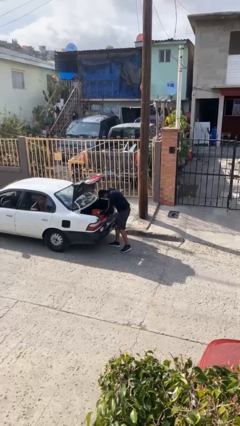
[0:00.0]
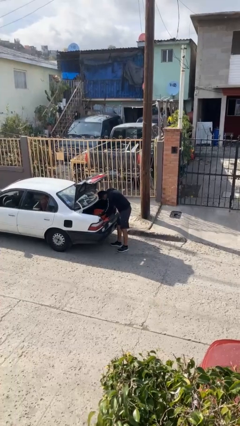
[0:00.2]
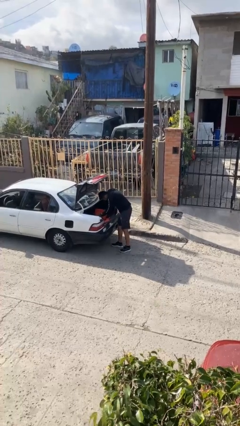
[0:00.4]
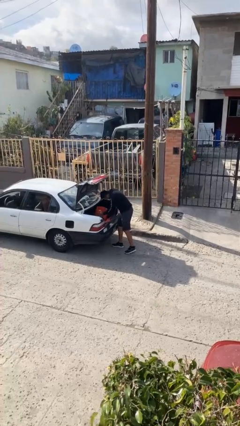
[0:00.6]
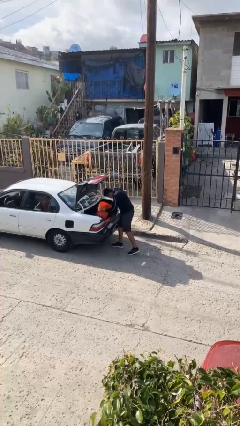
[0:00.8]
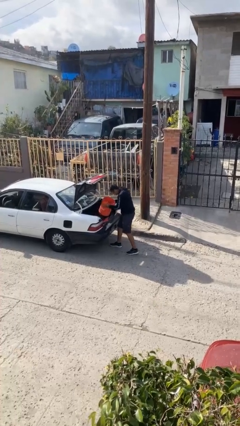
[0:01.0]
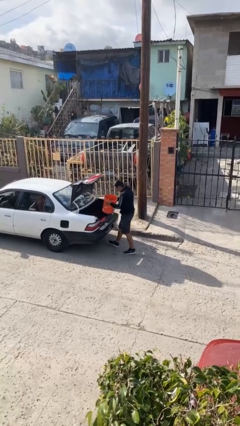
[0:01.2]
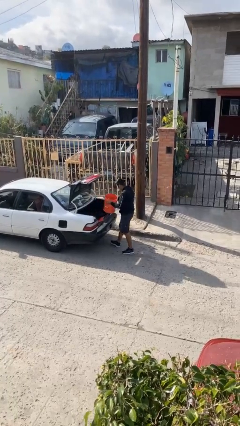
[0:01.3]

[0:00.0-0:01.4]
person unloads car

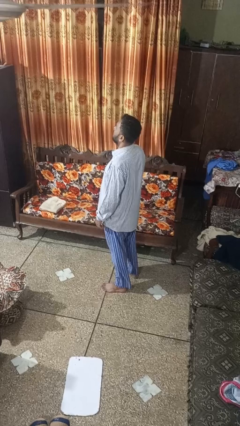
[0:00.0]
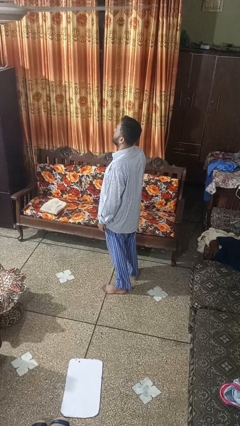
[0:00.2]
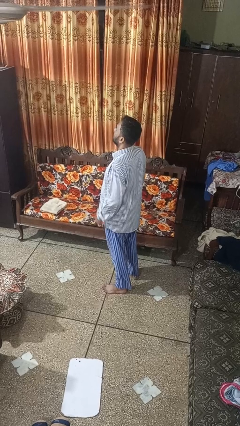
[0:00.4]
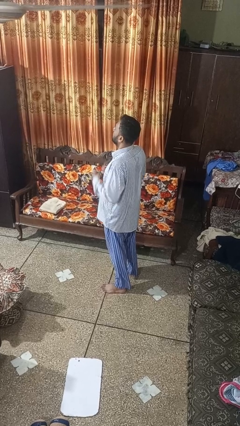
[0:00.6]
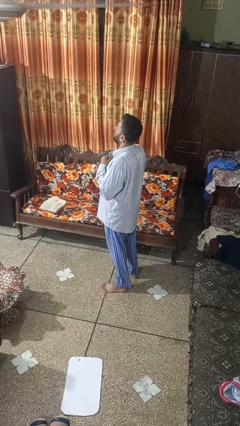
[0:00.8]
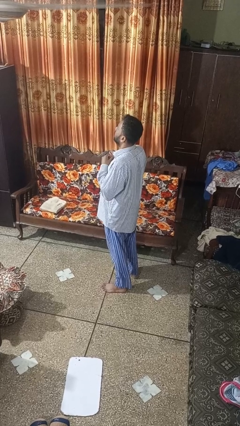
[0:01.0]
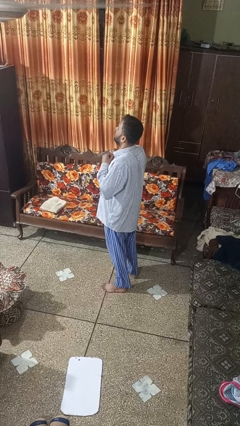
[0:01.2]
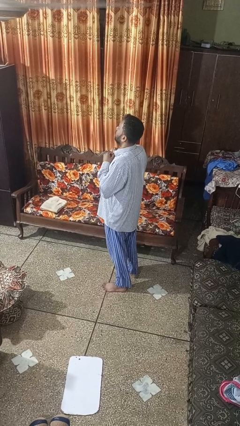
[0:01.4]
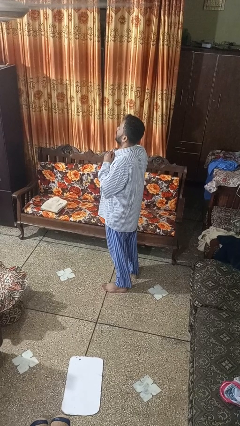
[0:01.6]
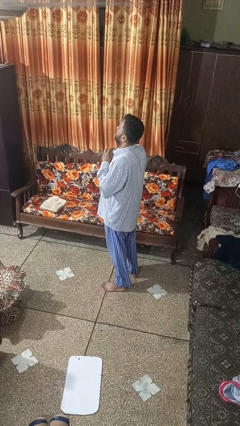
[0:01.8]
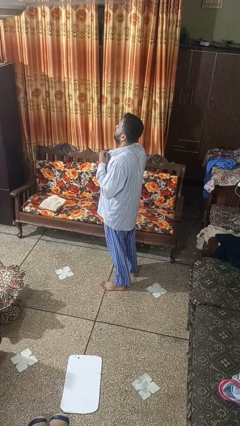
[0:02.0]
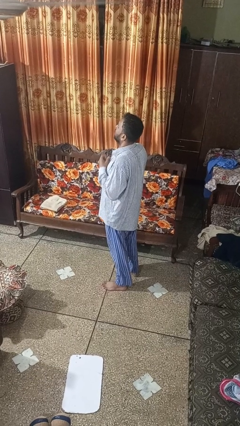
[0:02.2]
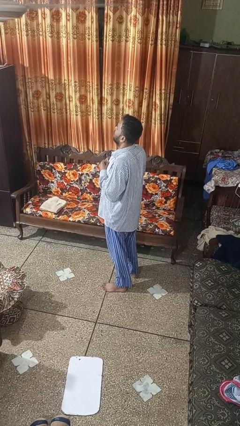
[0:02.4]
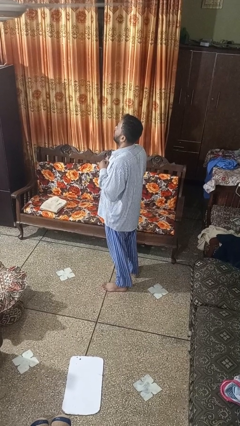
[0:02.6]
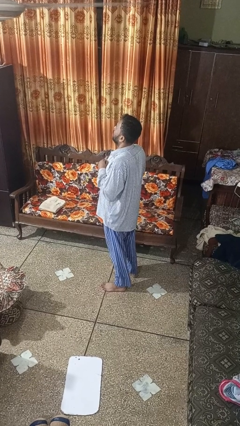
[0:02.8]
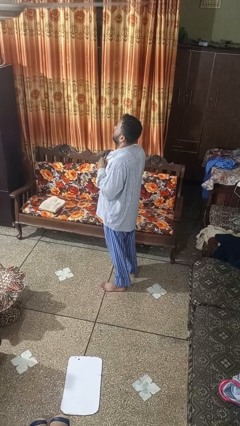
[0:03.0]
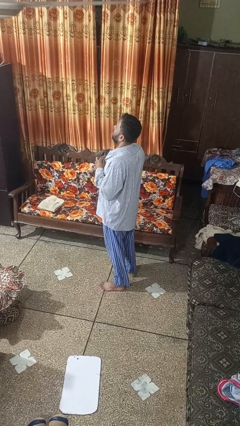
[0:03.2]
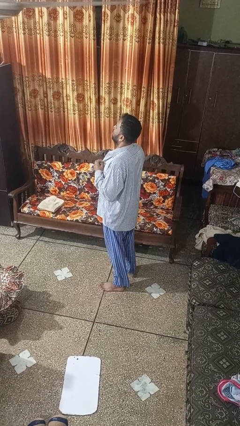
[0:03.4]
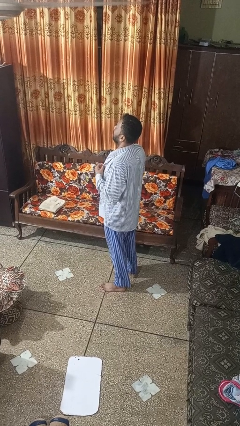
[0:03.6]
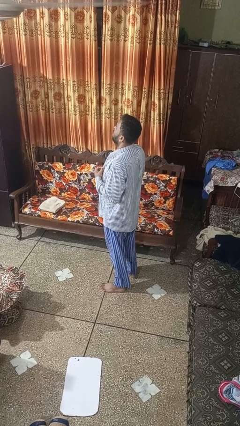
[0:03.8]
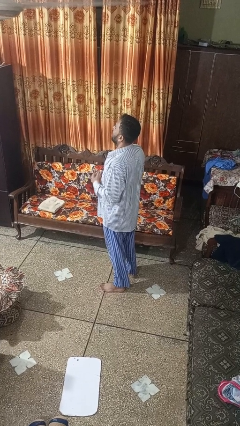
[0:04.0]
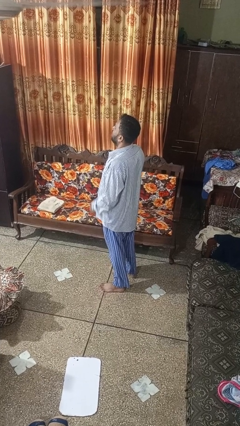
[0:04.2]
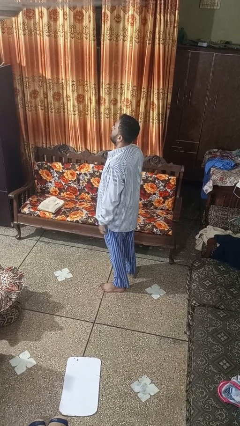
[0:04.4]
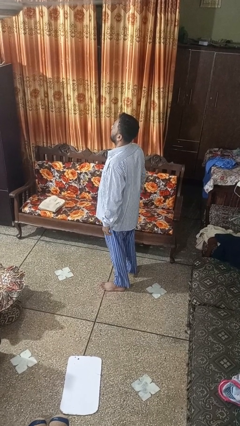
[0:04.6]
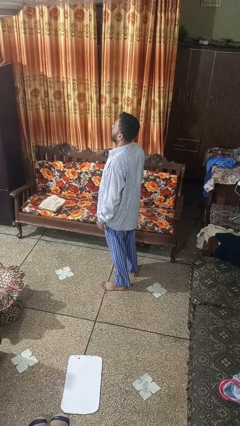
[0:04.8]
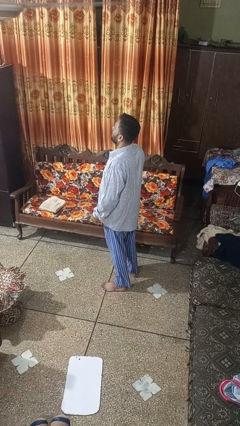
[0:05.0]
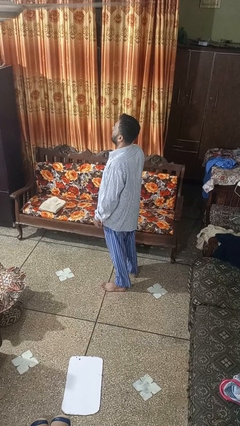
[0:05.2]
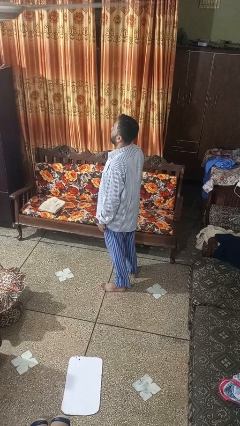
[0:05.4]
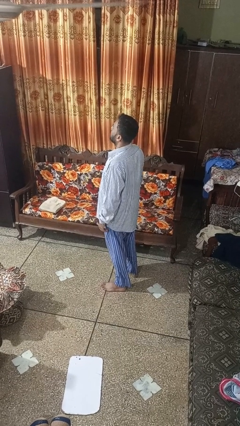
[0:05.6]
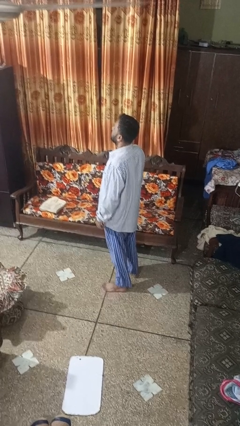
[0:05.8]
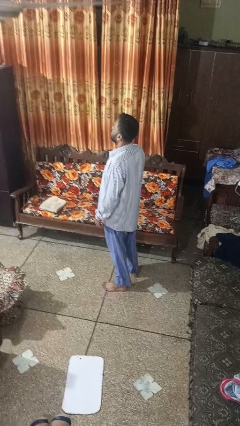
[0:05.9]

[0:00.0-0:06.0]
person unbuttons shirt

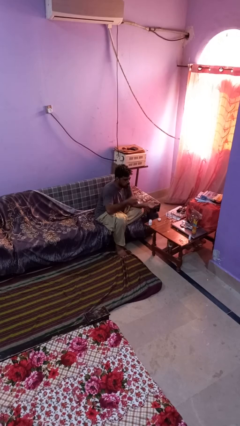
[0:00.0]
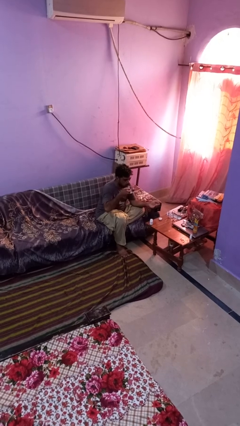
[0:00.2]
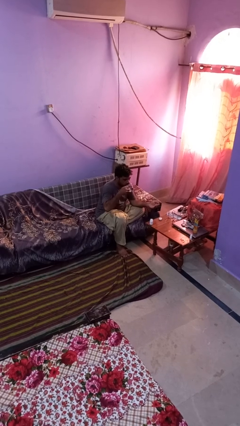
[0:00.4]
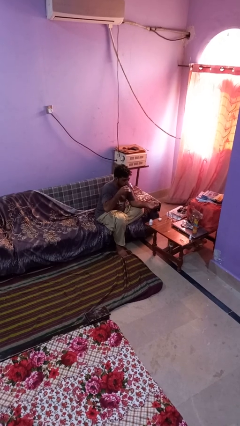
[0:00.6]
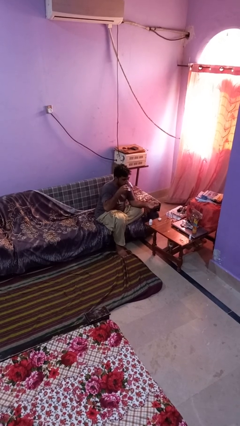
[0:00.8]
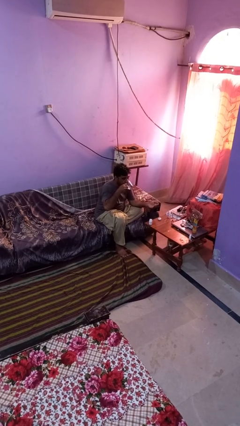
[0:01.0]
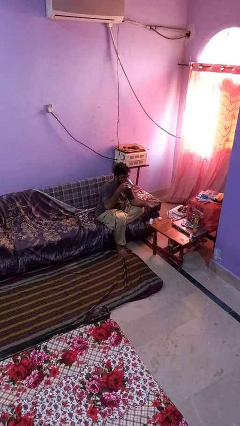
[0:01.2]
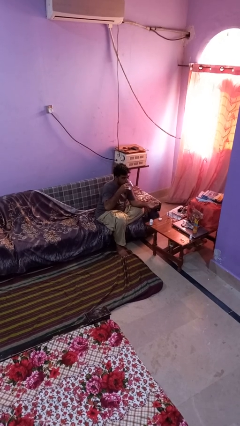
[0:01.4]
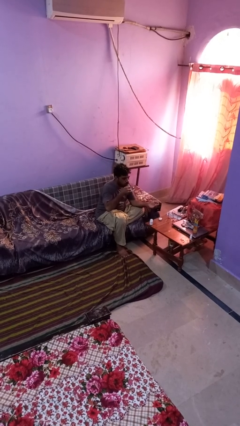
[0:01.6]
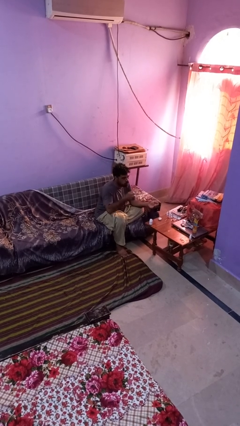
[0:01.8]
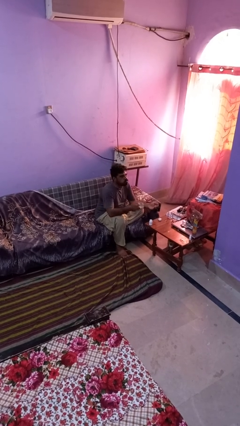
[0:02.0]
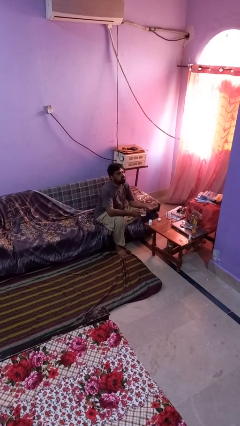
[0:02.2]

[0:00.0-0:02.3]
person drinks from cup

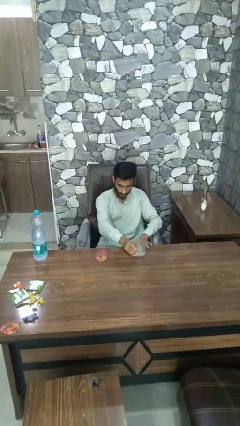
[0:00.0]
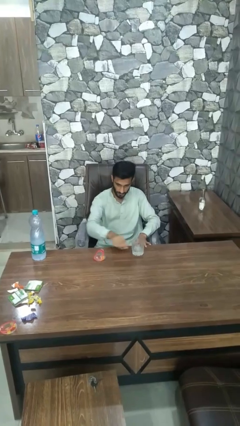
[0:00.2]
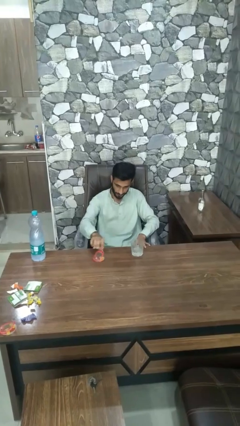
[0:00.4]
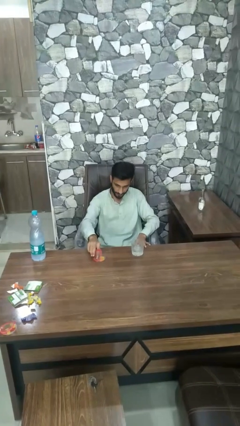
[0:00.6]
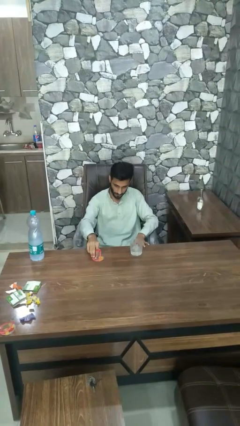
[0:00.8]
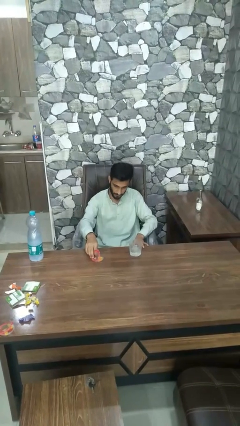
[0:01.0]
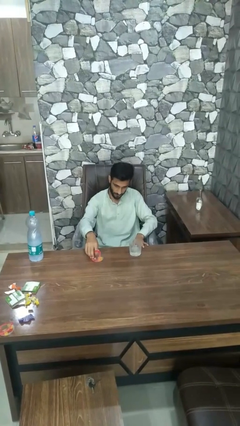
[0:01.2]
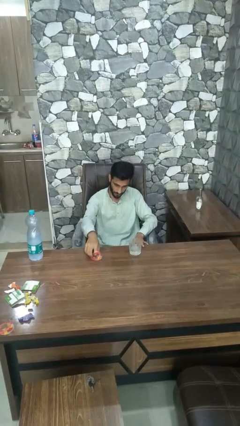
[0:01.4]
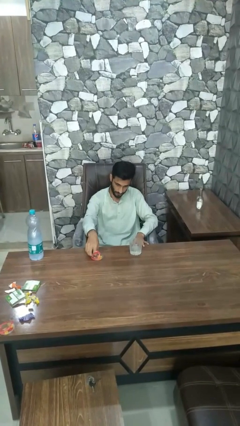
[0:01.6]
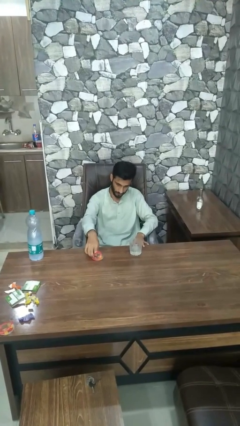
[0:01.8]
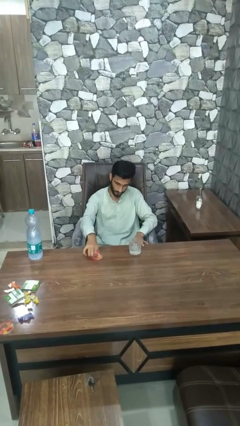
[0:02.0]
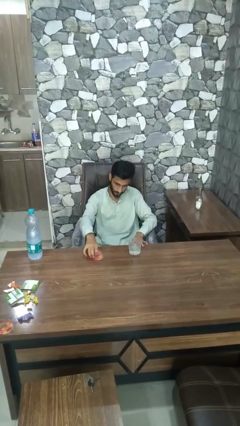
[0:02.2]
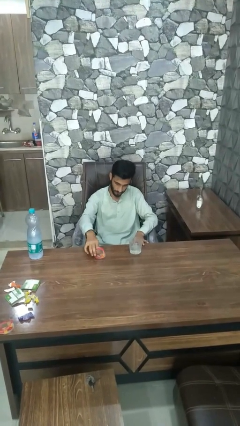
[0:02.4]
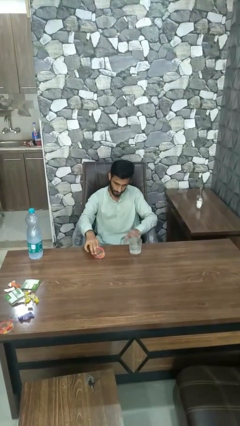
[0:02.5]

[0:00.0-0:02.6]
person takes medicine pills

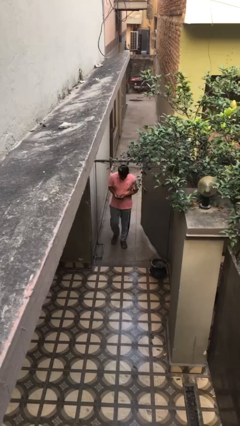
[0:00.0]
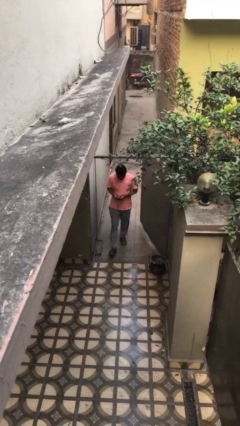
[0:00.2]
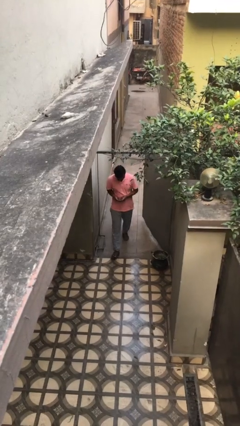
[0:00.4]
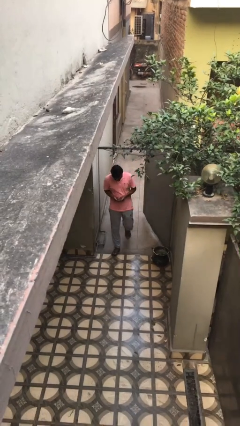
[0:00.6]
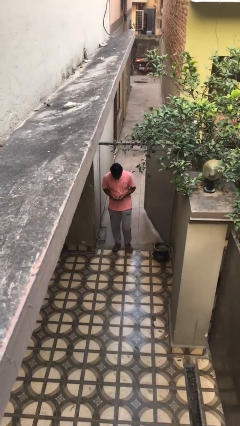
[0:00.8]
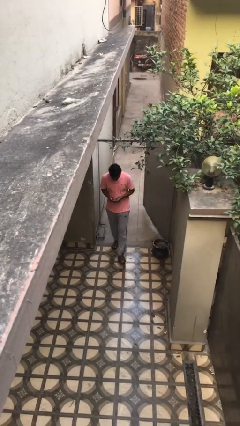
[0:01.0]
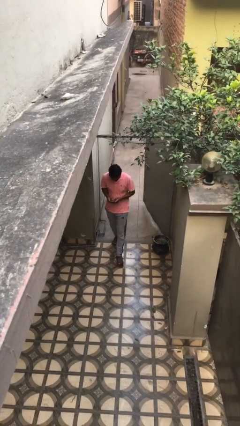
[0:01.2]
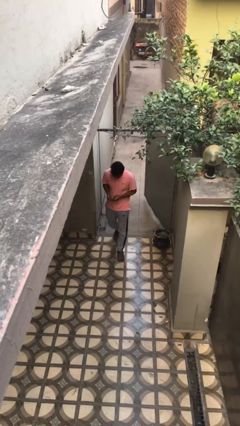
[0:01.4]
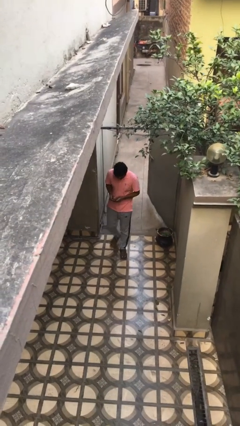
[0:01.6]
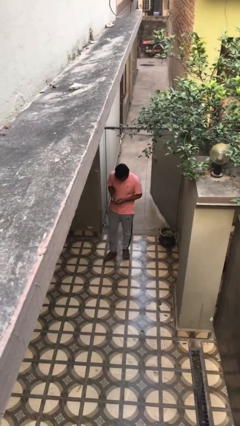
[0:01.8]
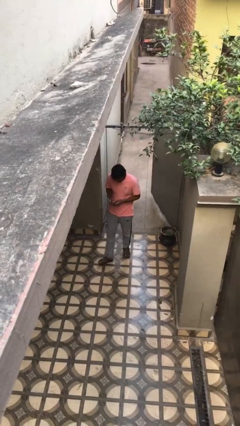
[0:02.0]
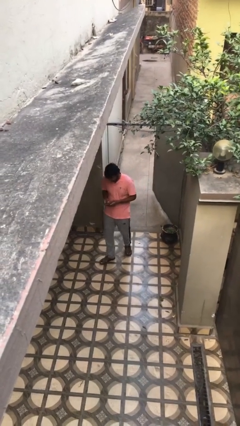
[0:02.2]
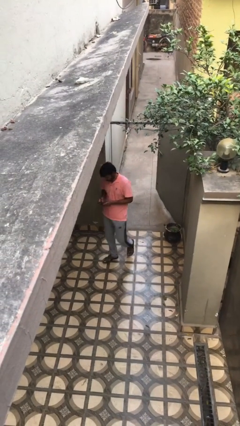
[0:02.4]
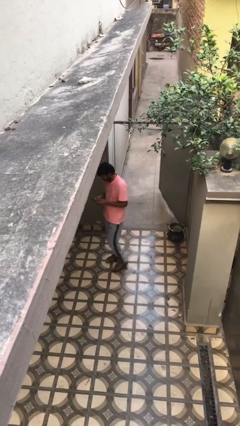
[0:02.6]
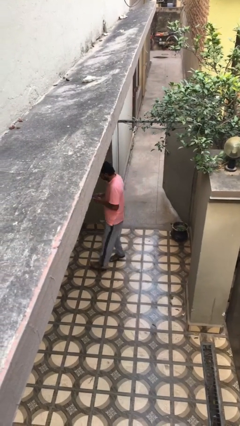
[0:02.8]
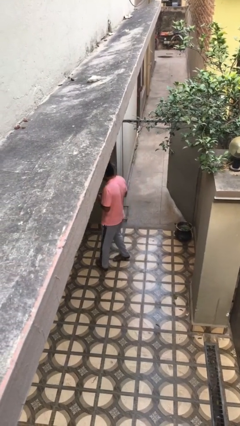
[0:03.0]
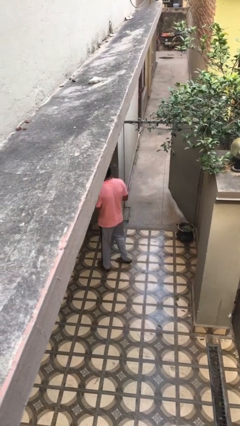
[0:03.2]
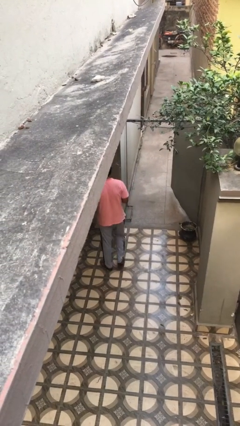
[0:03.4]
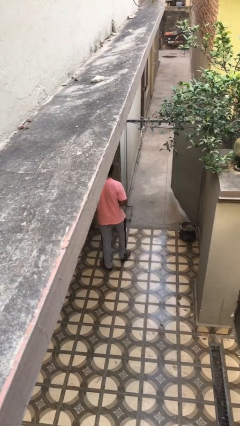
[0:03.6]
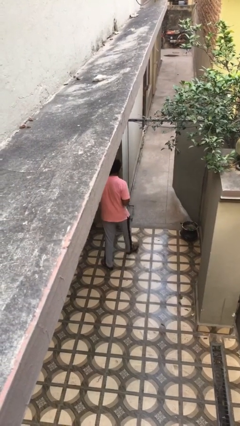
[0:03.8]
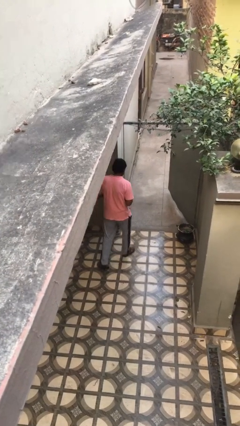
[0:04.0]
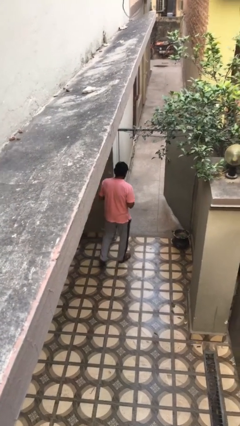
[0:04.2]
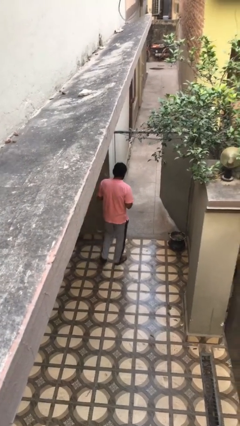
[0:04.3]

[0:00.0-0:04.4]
person enters scene through structure

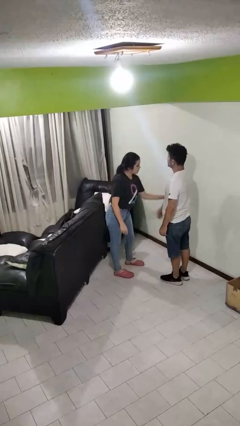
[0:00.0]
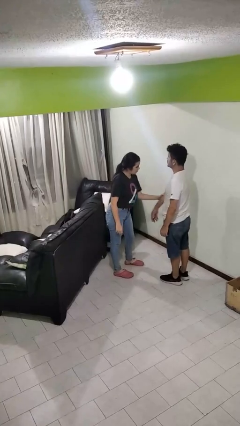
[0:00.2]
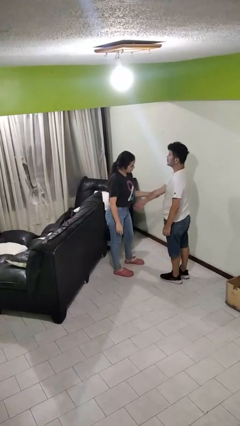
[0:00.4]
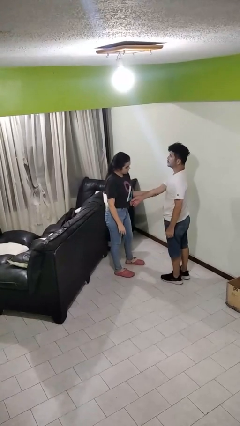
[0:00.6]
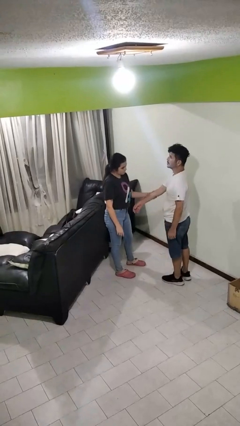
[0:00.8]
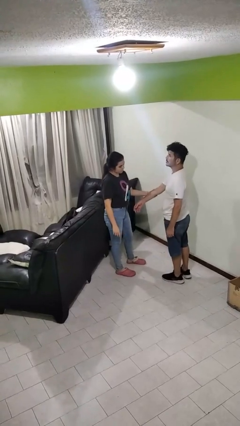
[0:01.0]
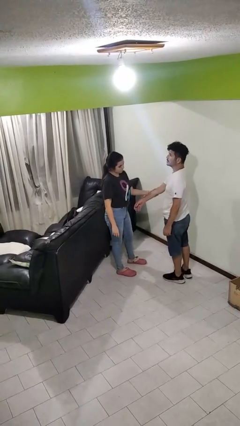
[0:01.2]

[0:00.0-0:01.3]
person grabs person by forearm
